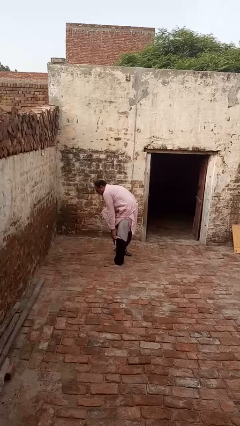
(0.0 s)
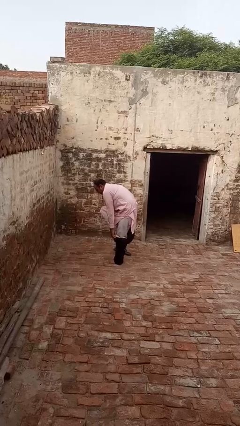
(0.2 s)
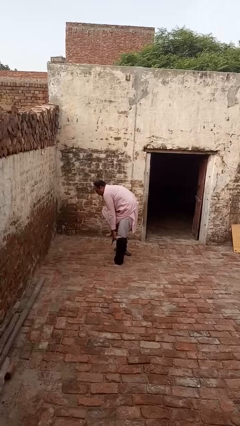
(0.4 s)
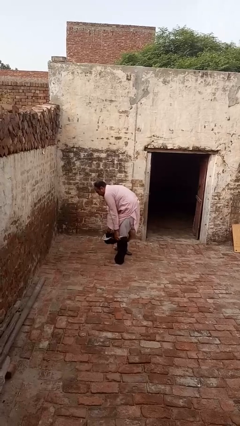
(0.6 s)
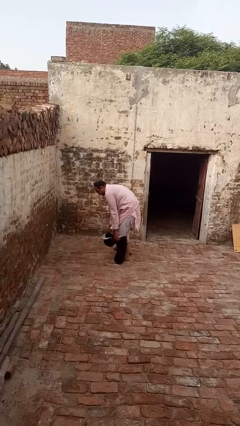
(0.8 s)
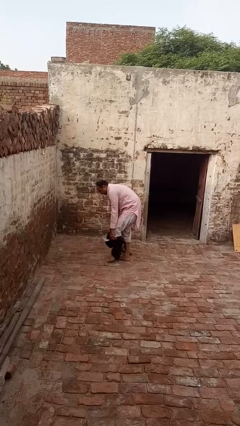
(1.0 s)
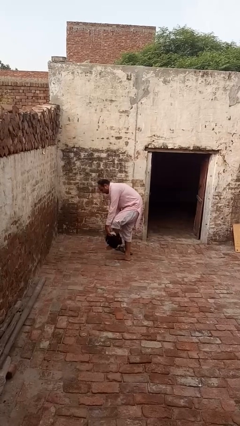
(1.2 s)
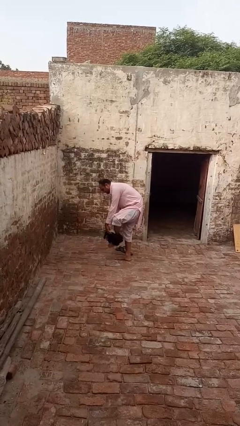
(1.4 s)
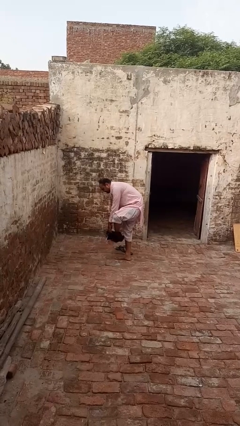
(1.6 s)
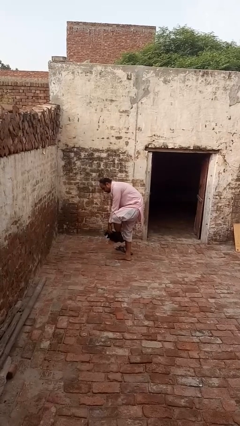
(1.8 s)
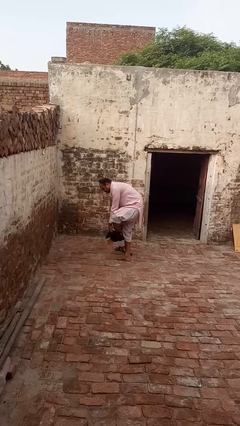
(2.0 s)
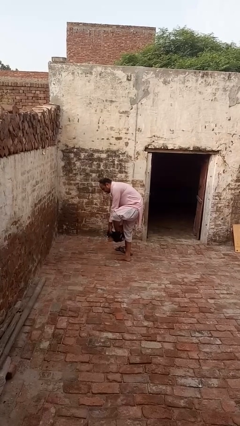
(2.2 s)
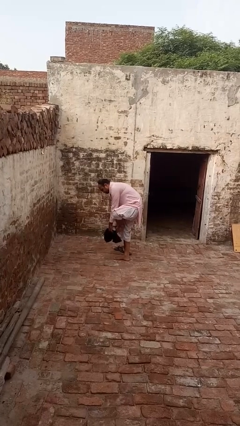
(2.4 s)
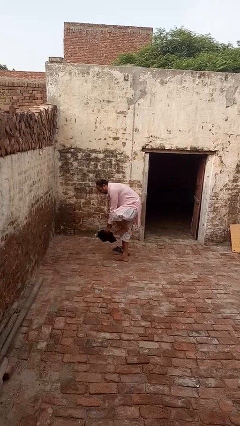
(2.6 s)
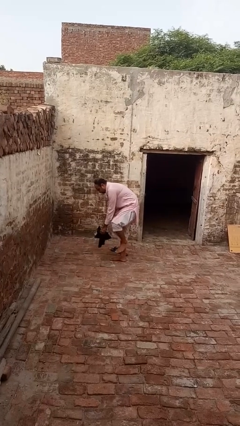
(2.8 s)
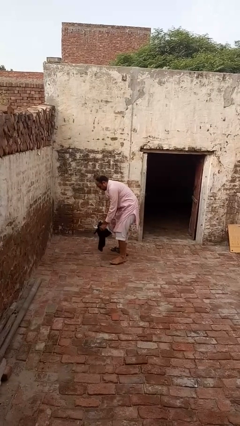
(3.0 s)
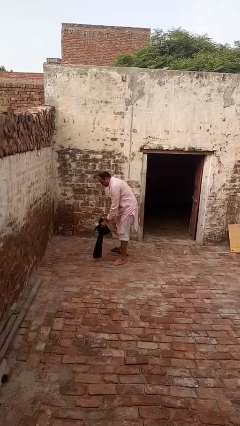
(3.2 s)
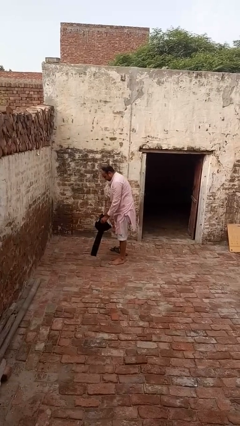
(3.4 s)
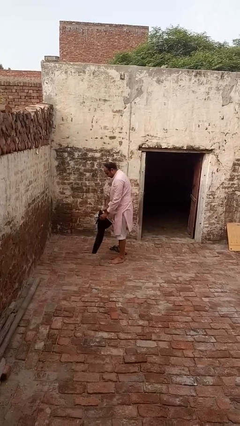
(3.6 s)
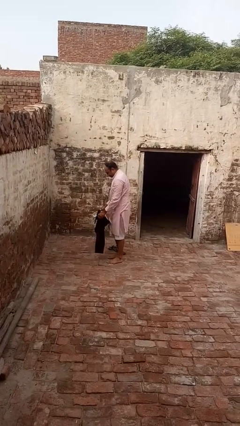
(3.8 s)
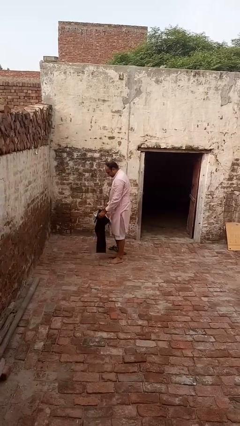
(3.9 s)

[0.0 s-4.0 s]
person takes off pants

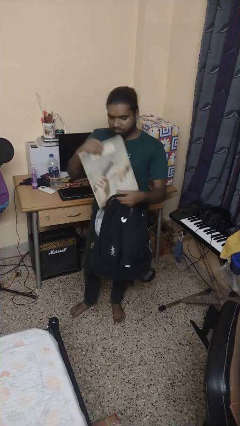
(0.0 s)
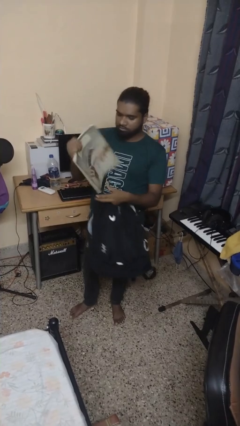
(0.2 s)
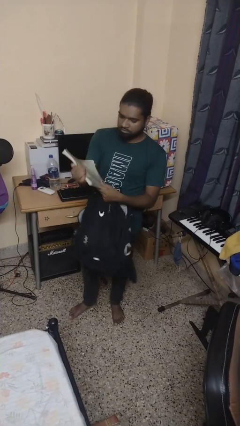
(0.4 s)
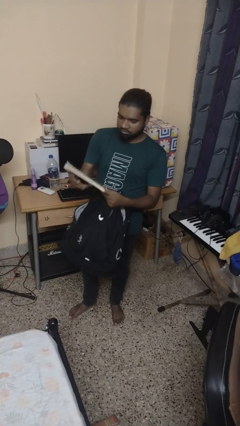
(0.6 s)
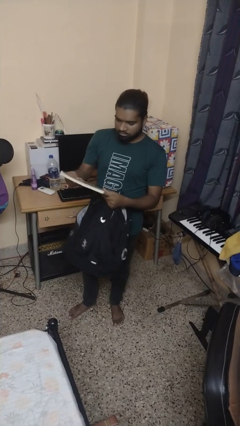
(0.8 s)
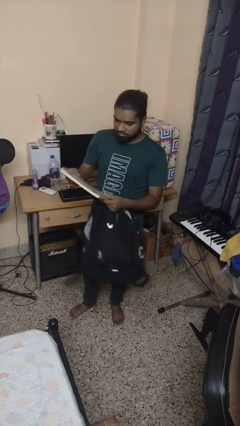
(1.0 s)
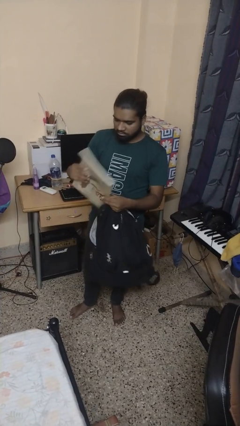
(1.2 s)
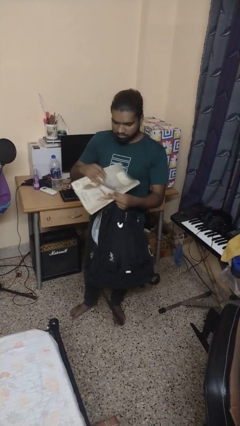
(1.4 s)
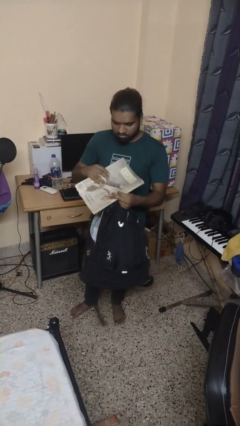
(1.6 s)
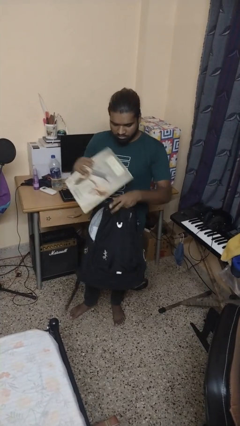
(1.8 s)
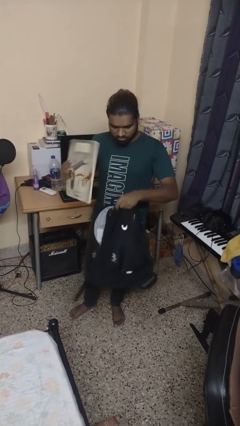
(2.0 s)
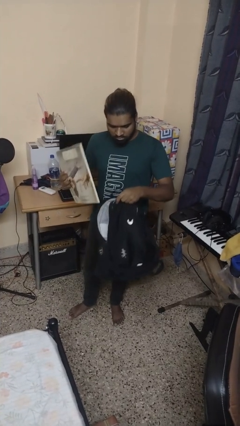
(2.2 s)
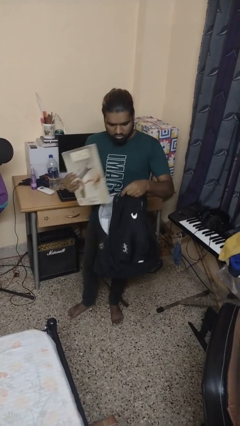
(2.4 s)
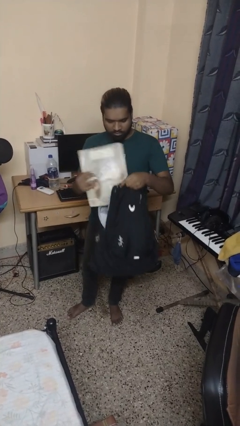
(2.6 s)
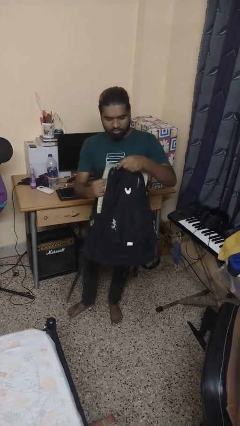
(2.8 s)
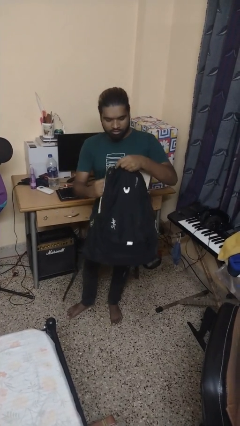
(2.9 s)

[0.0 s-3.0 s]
person takes object from backpack

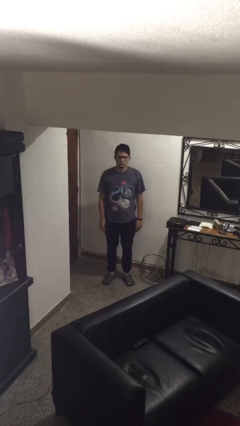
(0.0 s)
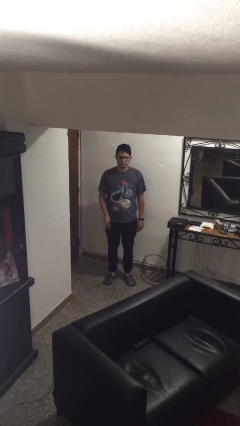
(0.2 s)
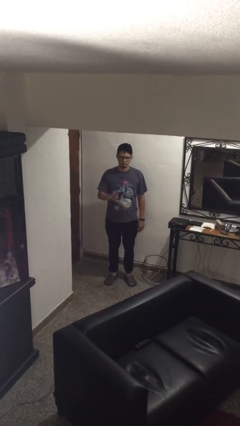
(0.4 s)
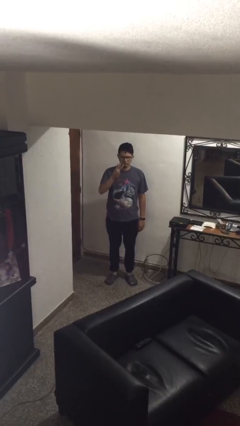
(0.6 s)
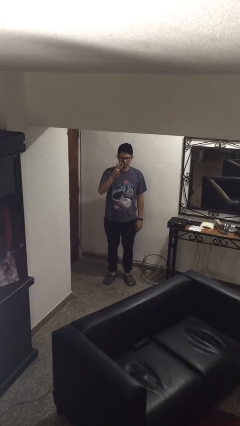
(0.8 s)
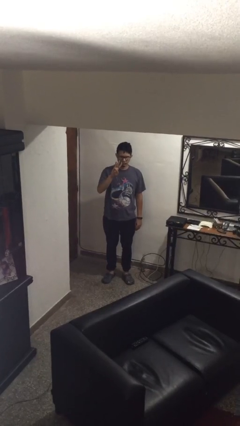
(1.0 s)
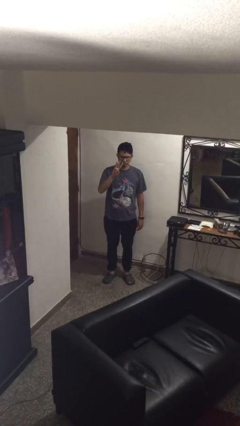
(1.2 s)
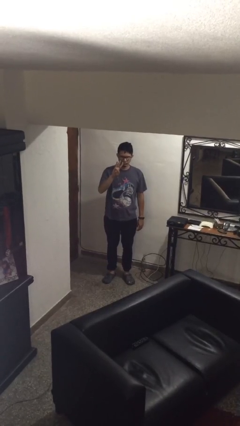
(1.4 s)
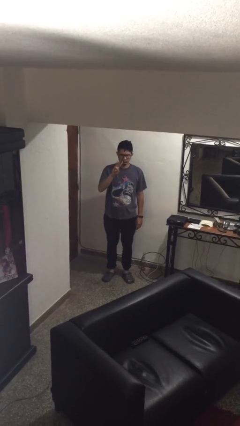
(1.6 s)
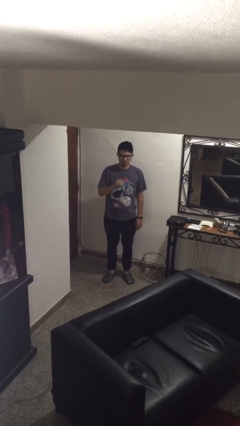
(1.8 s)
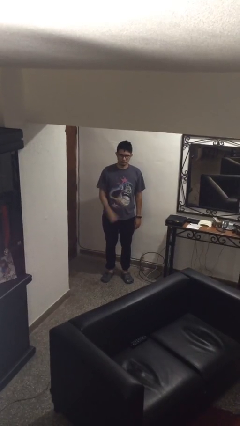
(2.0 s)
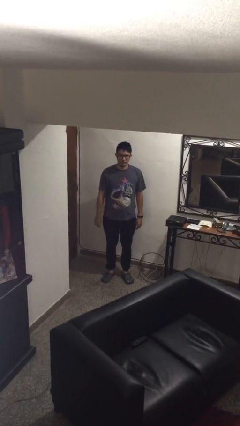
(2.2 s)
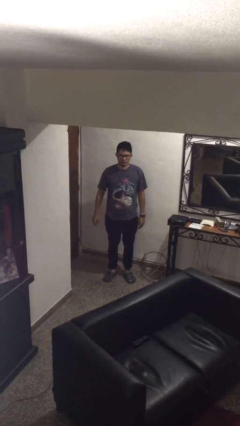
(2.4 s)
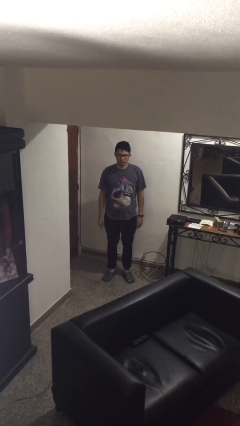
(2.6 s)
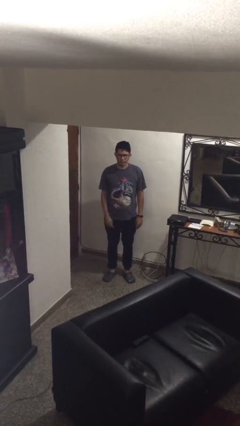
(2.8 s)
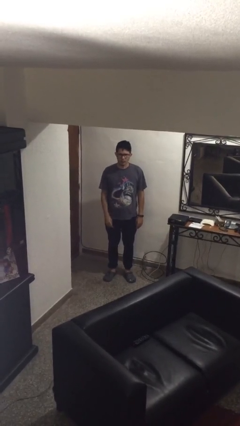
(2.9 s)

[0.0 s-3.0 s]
person gestures number three

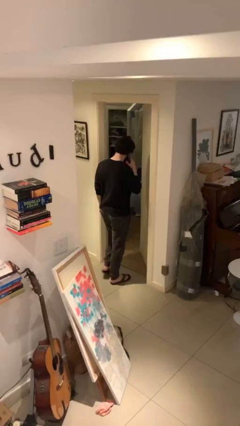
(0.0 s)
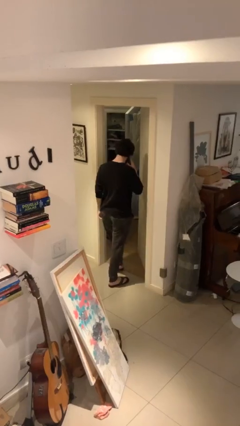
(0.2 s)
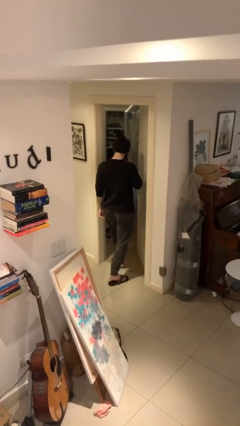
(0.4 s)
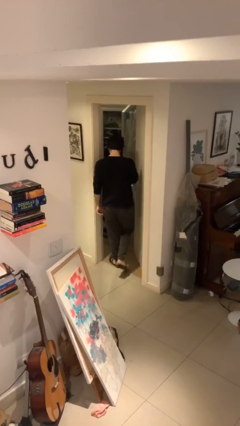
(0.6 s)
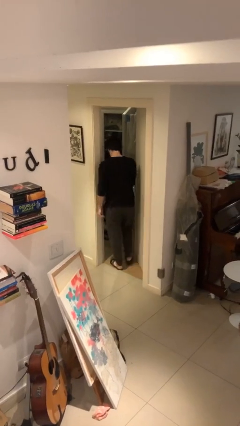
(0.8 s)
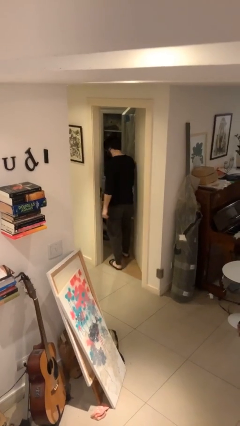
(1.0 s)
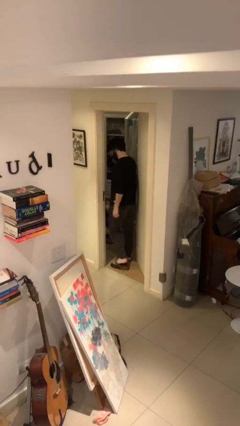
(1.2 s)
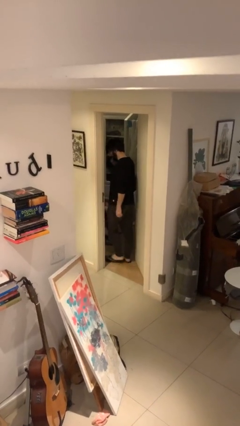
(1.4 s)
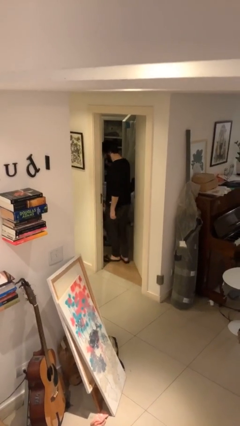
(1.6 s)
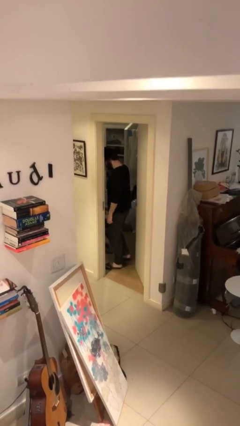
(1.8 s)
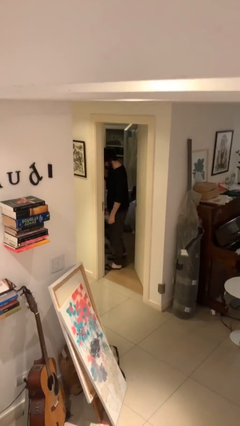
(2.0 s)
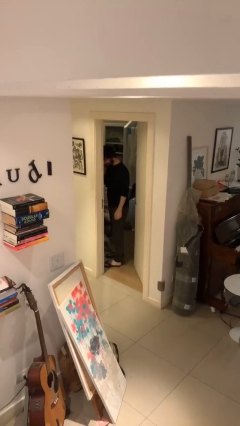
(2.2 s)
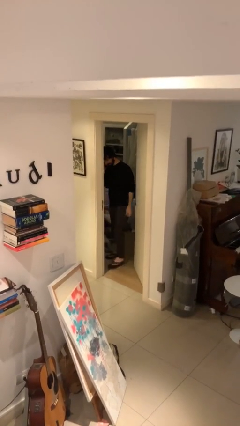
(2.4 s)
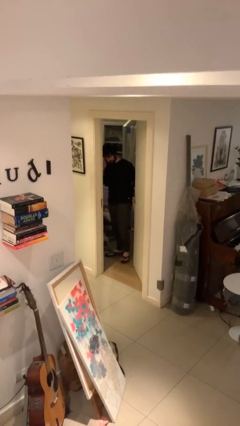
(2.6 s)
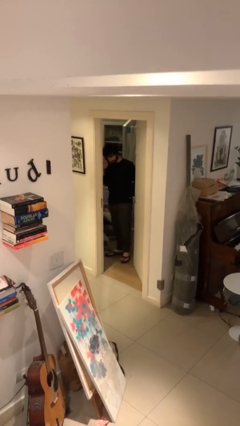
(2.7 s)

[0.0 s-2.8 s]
person exits scene through structure

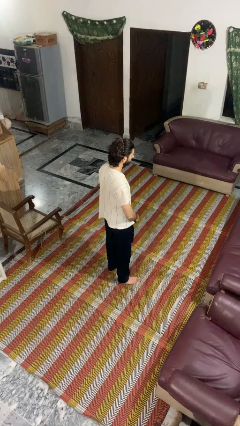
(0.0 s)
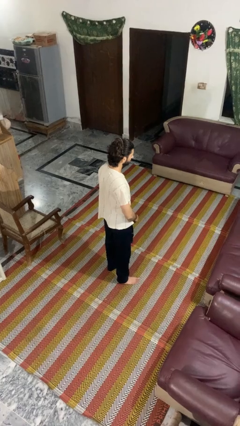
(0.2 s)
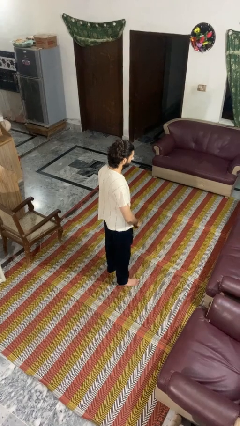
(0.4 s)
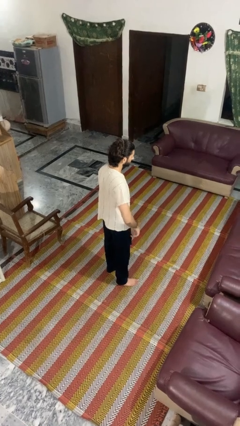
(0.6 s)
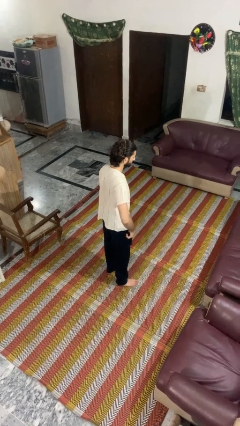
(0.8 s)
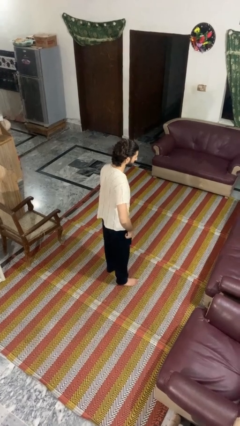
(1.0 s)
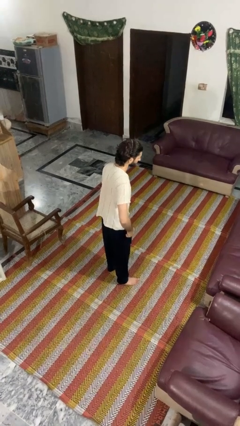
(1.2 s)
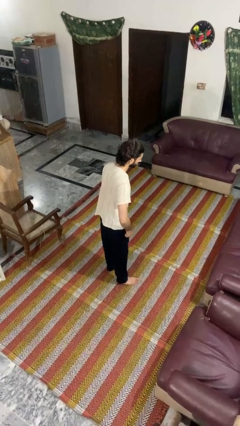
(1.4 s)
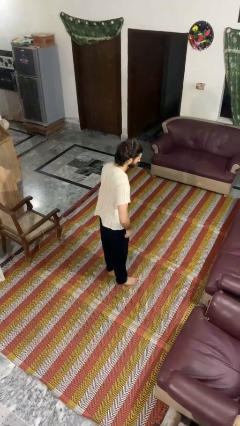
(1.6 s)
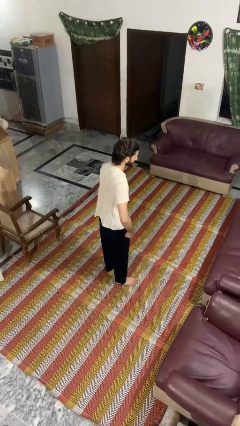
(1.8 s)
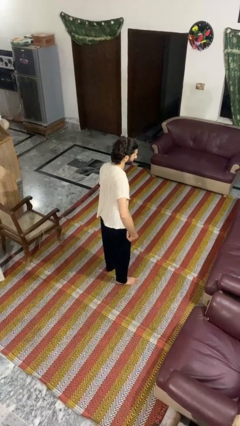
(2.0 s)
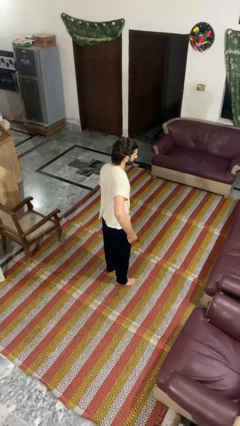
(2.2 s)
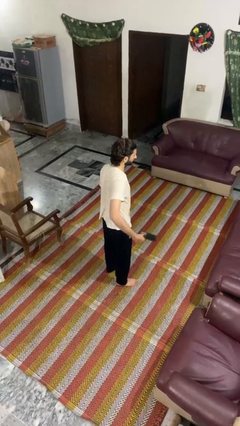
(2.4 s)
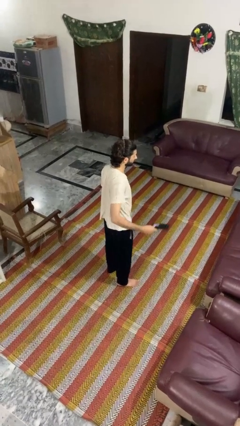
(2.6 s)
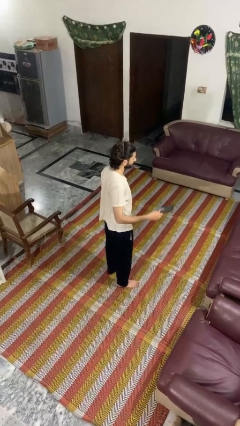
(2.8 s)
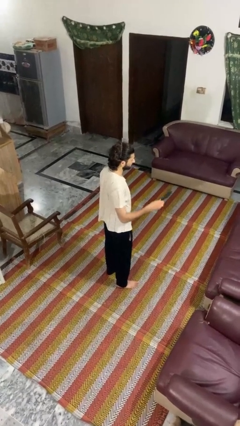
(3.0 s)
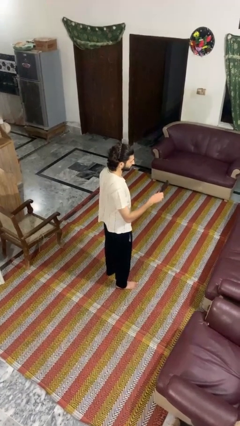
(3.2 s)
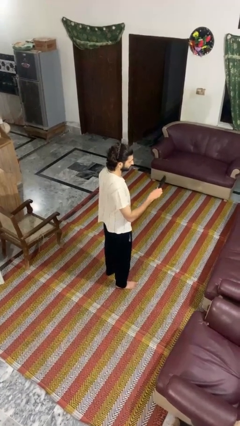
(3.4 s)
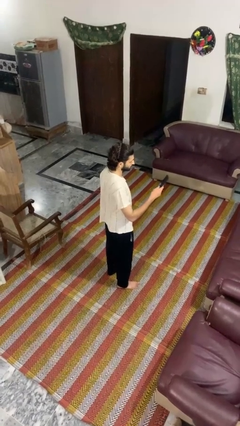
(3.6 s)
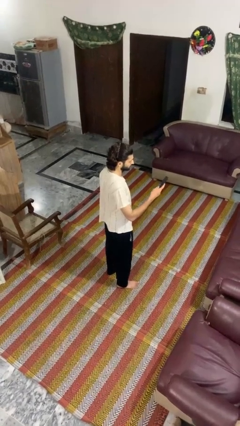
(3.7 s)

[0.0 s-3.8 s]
person takes phone from pocket

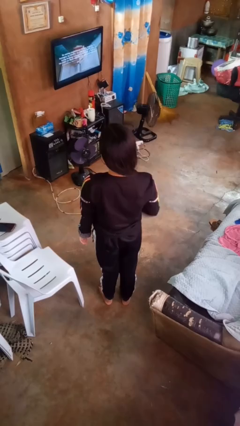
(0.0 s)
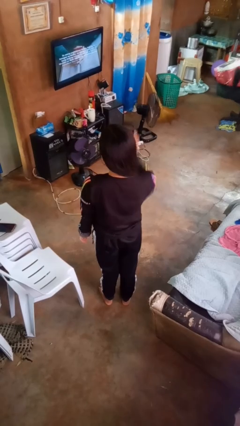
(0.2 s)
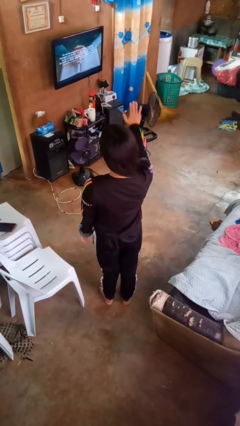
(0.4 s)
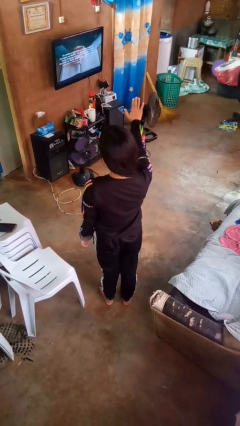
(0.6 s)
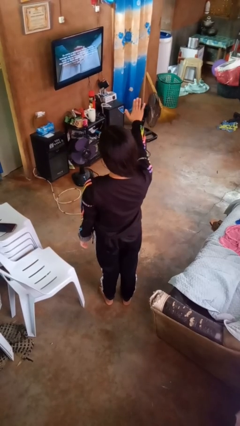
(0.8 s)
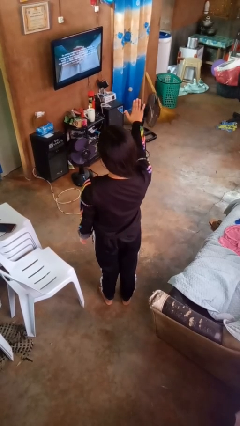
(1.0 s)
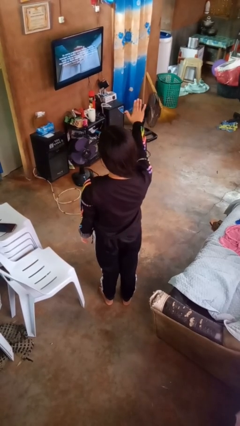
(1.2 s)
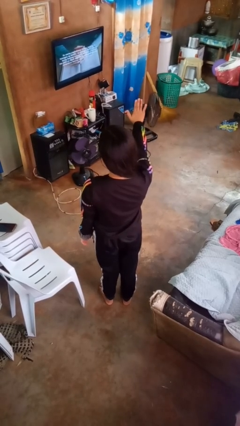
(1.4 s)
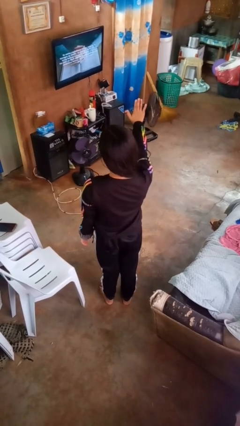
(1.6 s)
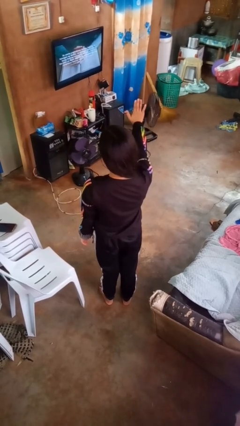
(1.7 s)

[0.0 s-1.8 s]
person gestures stop
